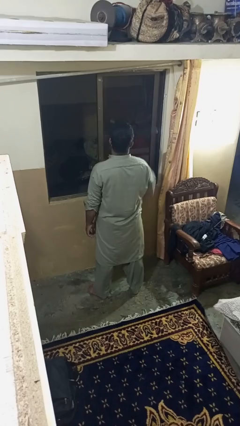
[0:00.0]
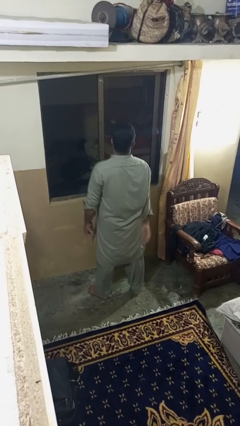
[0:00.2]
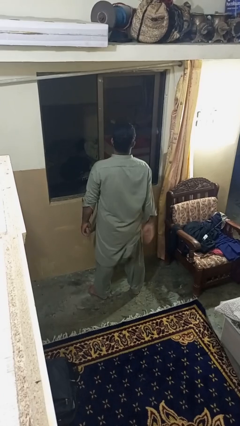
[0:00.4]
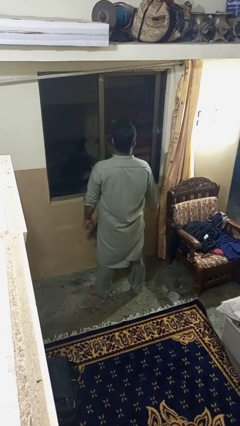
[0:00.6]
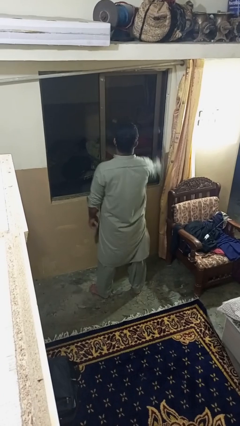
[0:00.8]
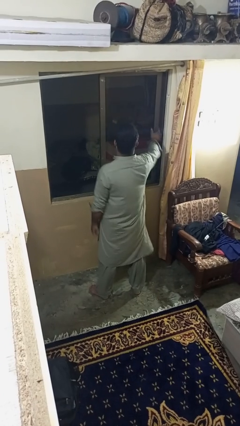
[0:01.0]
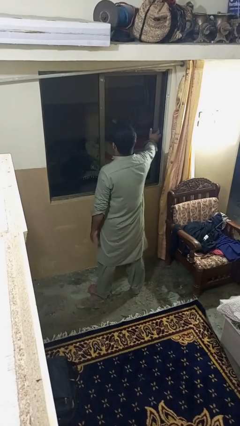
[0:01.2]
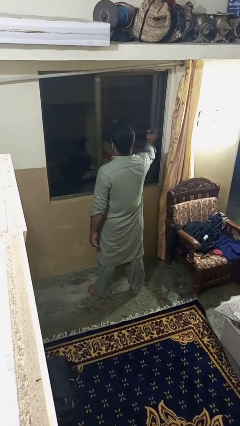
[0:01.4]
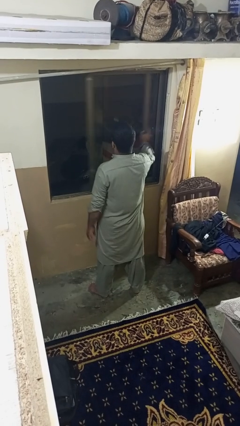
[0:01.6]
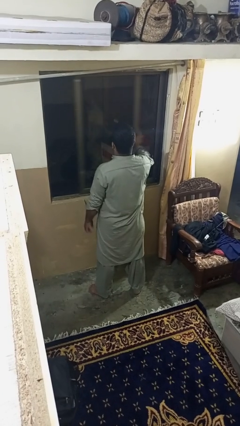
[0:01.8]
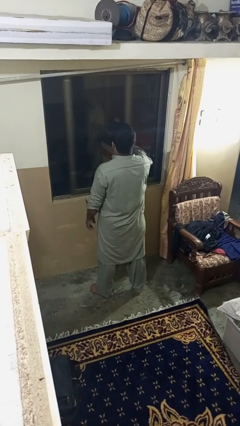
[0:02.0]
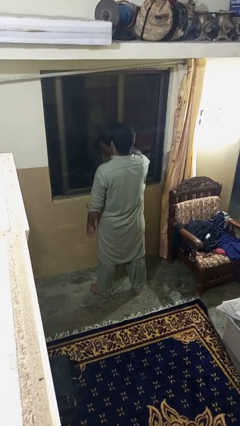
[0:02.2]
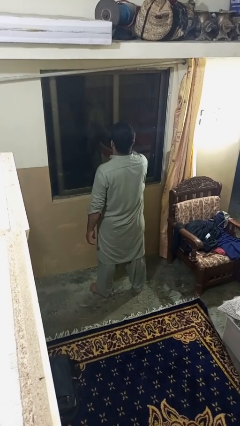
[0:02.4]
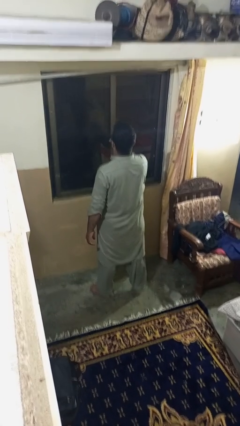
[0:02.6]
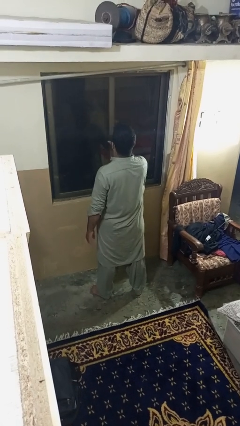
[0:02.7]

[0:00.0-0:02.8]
person closes home window

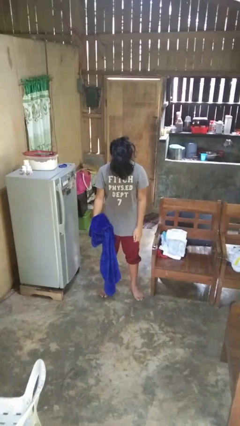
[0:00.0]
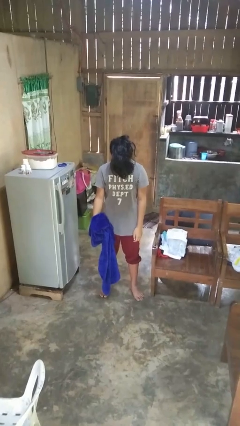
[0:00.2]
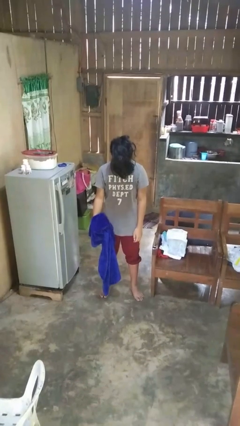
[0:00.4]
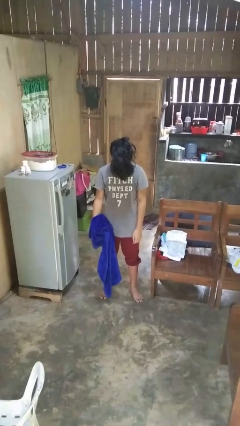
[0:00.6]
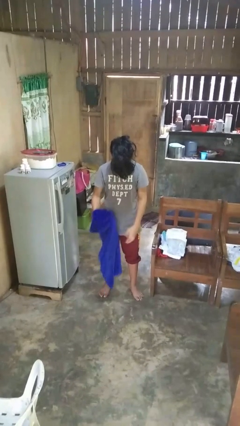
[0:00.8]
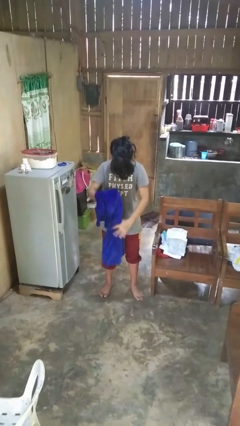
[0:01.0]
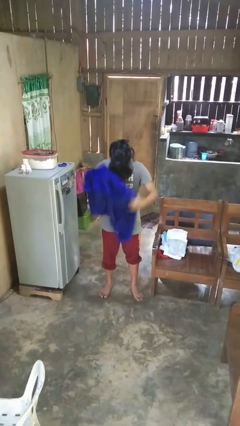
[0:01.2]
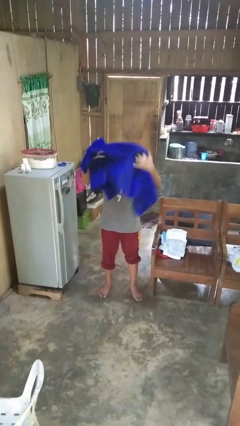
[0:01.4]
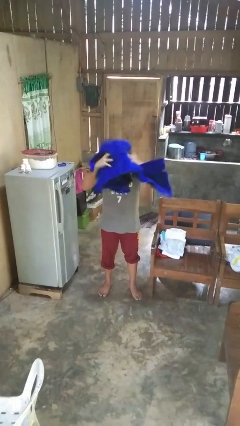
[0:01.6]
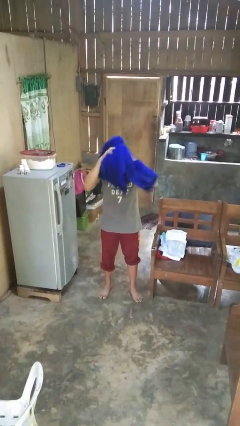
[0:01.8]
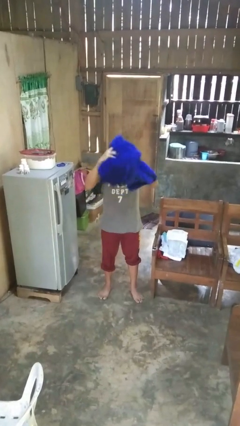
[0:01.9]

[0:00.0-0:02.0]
person dries hair with towel

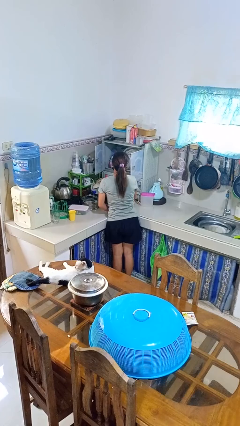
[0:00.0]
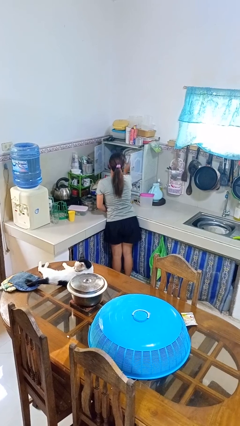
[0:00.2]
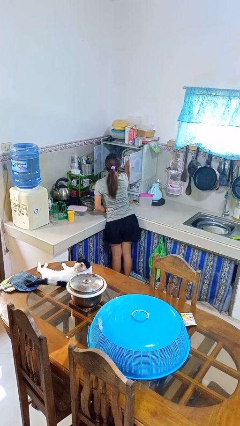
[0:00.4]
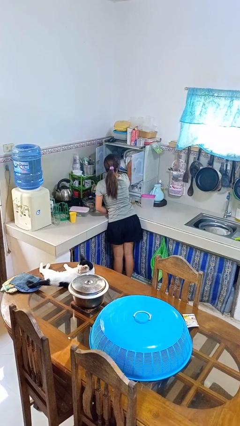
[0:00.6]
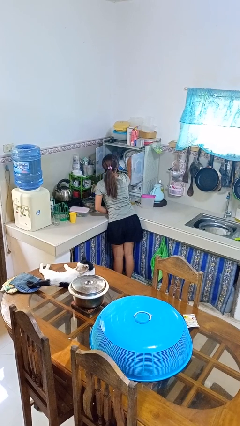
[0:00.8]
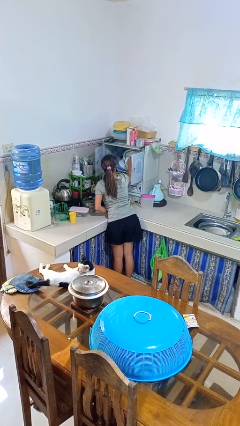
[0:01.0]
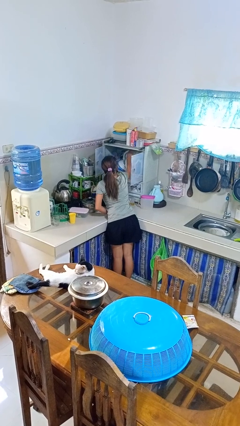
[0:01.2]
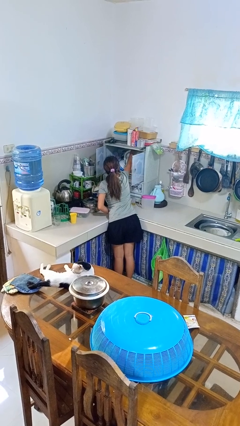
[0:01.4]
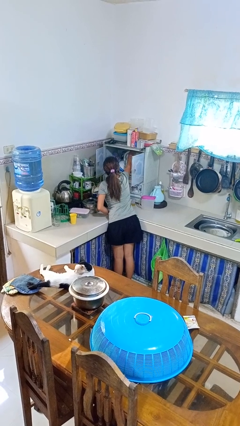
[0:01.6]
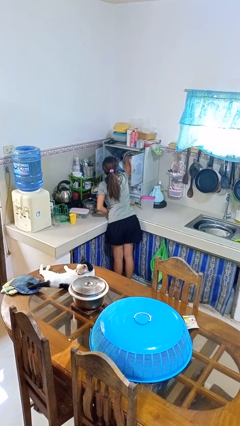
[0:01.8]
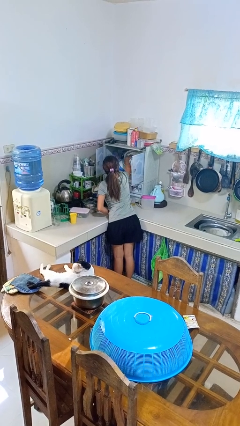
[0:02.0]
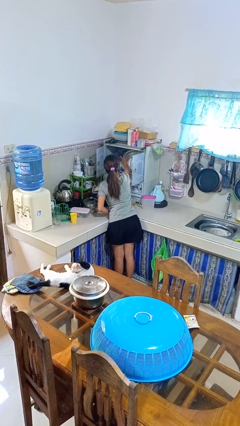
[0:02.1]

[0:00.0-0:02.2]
person searches in kitchen drawer

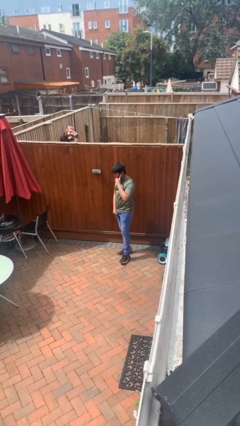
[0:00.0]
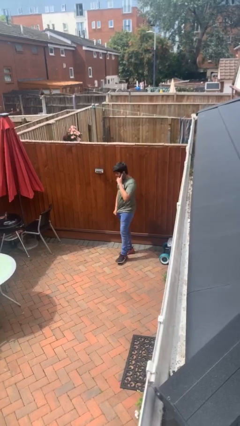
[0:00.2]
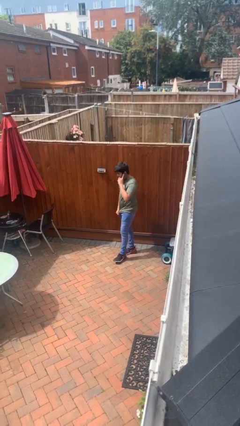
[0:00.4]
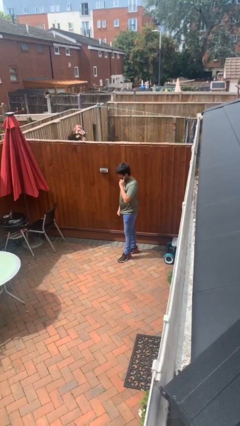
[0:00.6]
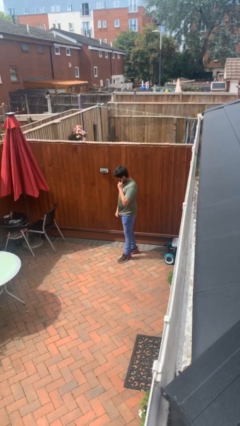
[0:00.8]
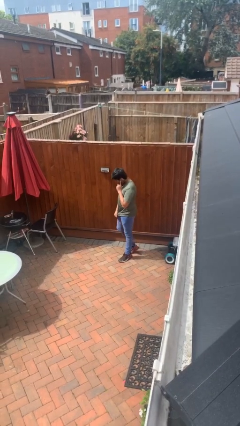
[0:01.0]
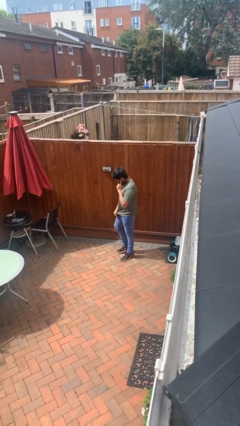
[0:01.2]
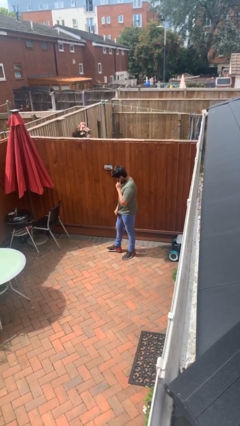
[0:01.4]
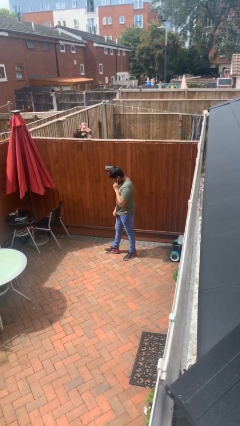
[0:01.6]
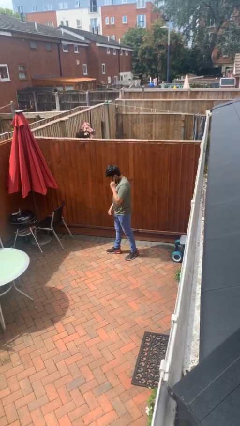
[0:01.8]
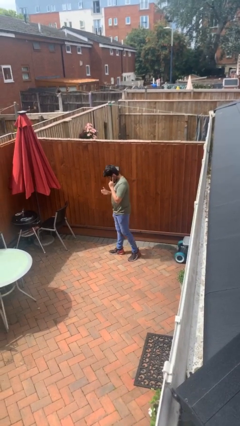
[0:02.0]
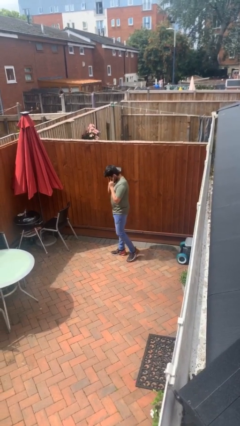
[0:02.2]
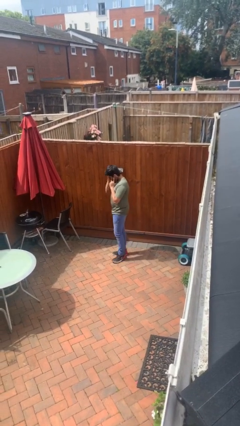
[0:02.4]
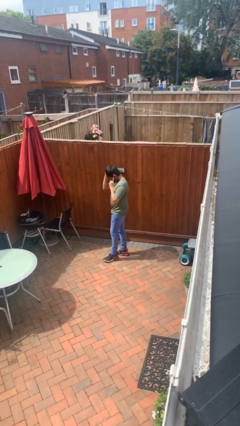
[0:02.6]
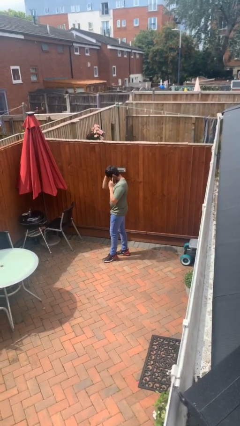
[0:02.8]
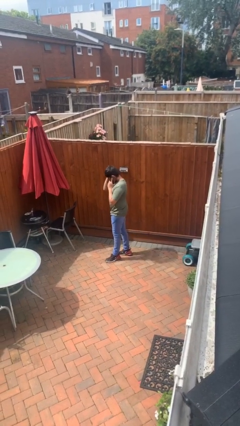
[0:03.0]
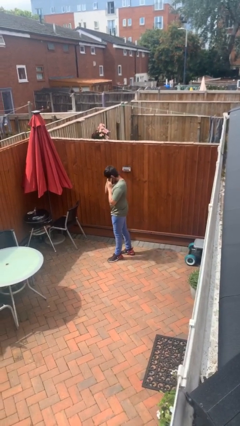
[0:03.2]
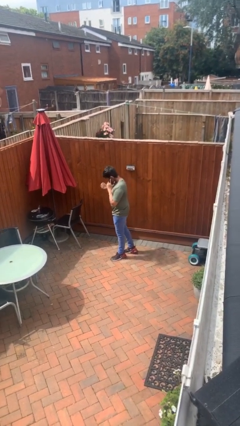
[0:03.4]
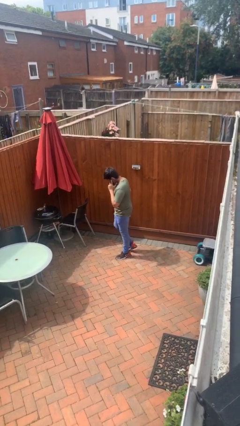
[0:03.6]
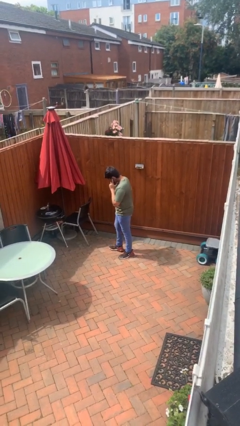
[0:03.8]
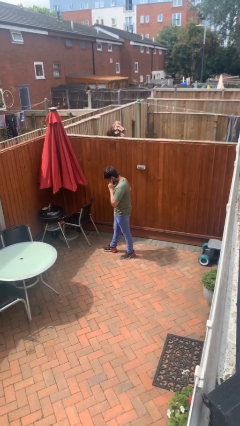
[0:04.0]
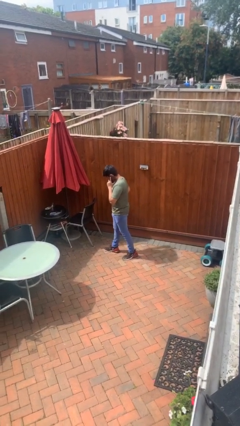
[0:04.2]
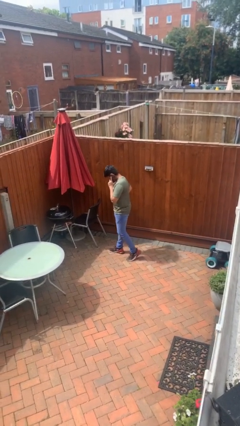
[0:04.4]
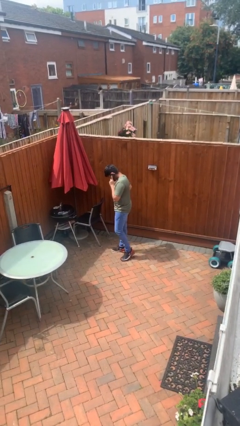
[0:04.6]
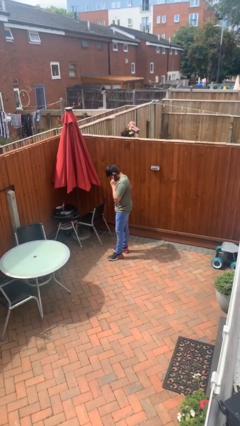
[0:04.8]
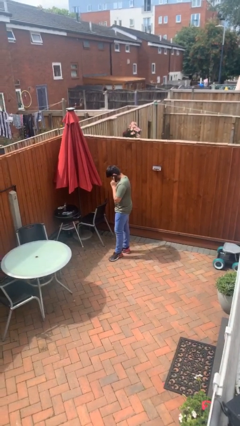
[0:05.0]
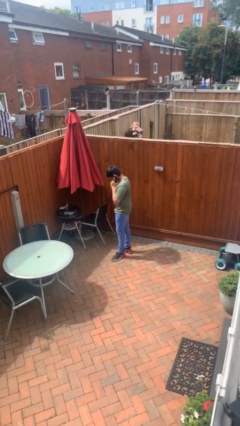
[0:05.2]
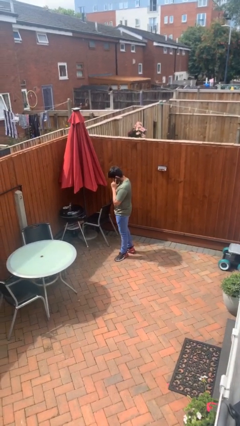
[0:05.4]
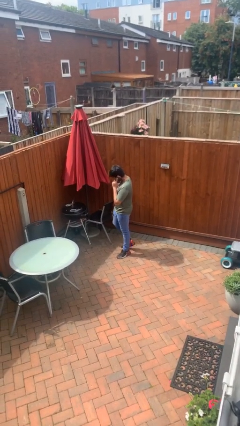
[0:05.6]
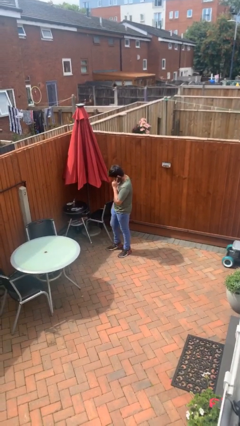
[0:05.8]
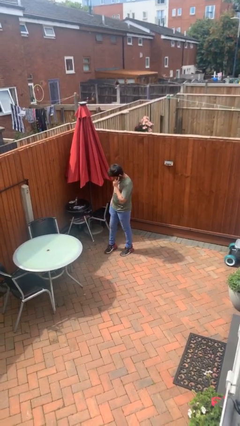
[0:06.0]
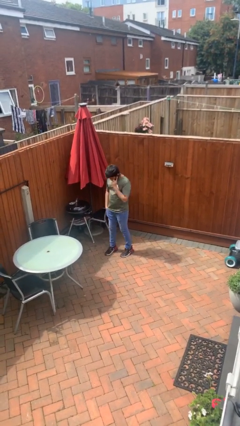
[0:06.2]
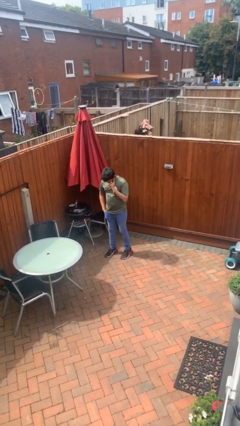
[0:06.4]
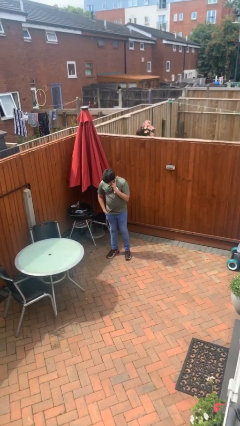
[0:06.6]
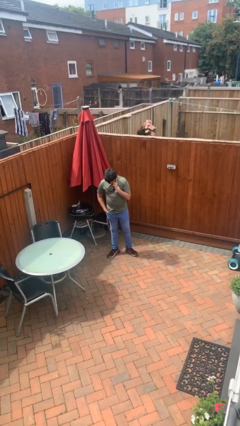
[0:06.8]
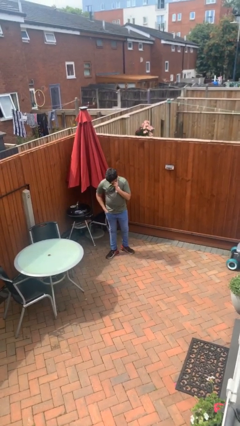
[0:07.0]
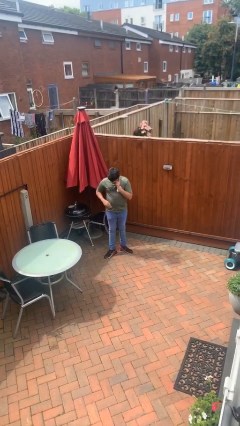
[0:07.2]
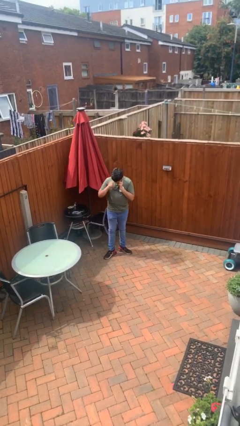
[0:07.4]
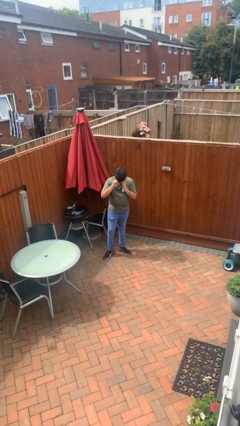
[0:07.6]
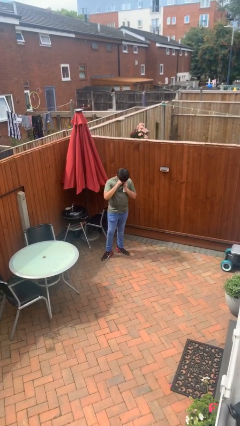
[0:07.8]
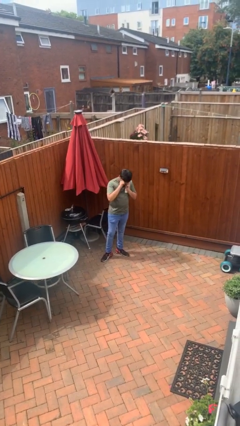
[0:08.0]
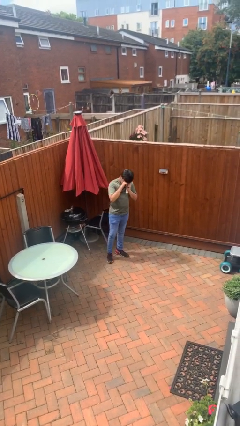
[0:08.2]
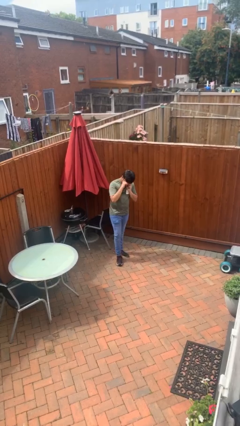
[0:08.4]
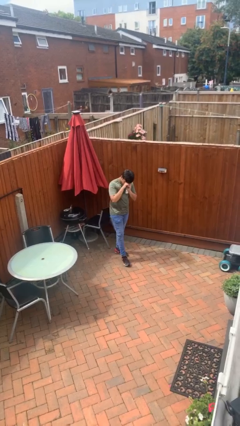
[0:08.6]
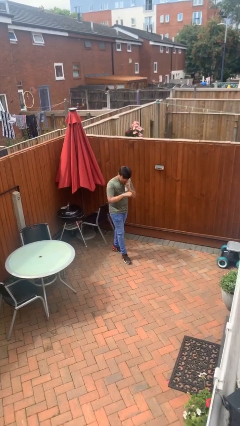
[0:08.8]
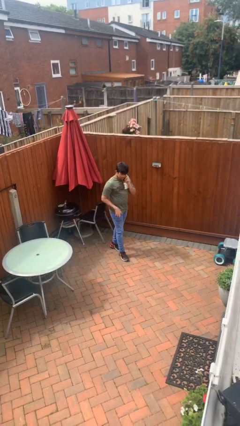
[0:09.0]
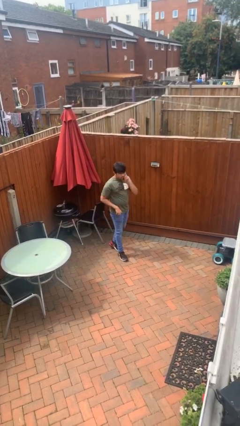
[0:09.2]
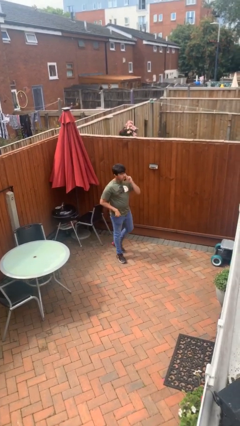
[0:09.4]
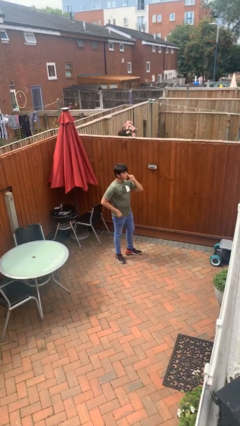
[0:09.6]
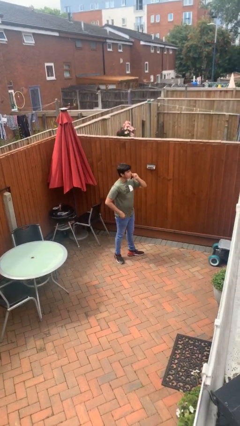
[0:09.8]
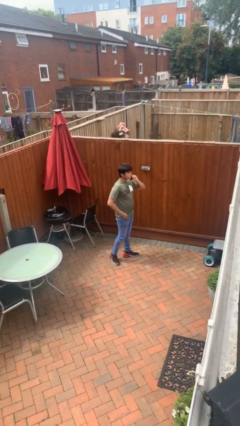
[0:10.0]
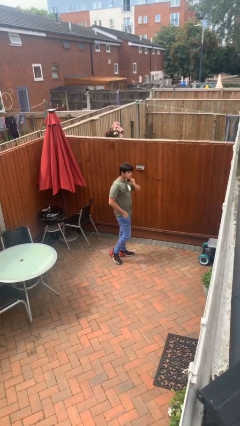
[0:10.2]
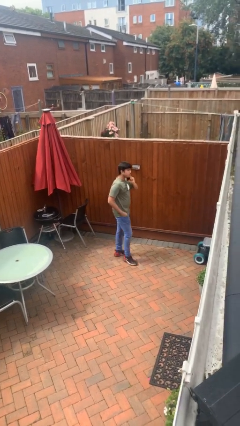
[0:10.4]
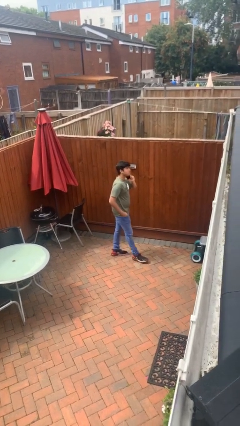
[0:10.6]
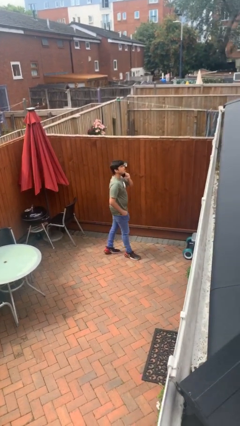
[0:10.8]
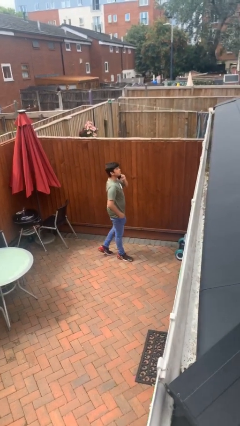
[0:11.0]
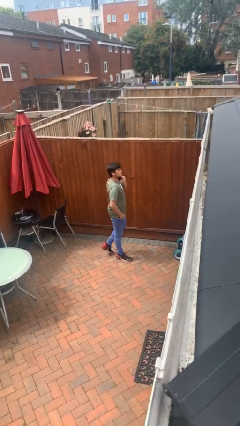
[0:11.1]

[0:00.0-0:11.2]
person talks on phone
